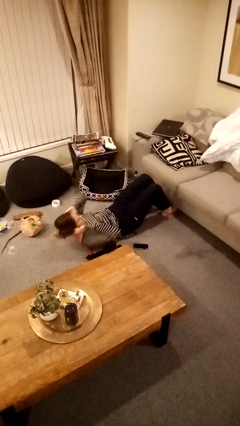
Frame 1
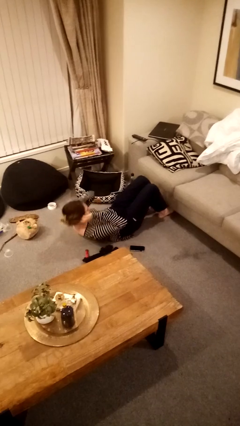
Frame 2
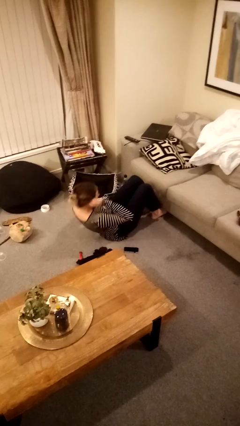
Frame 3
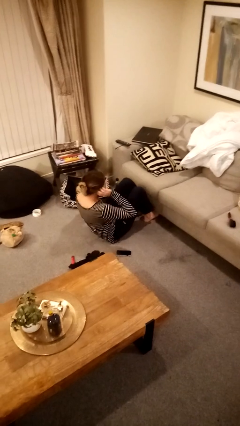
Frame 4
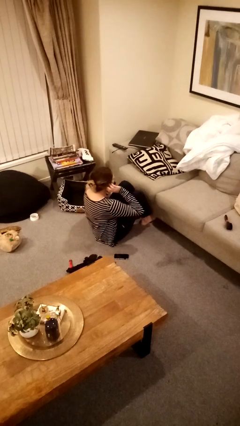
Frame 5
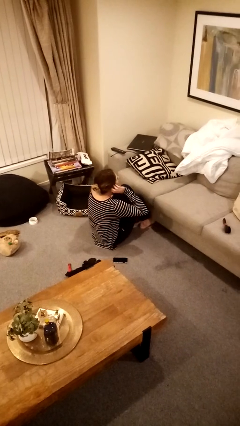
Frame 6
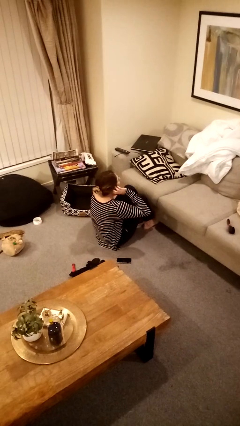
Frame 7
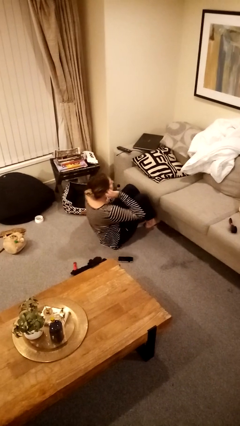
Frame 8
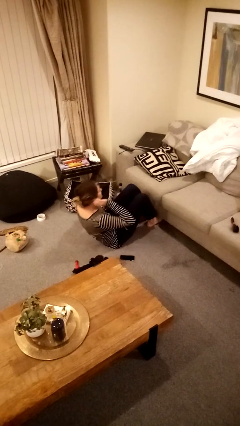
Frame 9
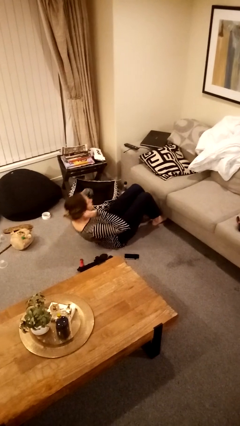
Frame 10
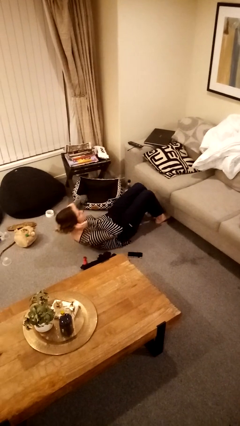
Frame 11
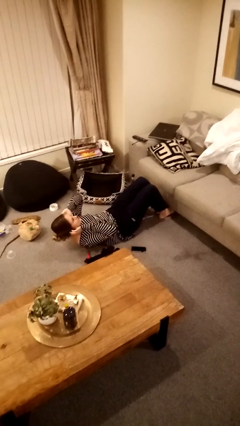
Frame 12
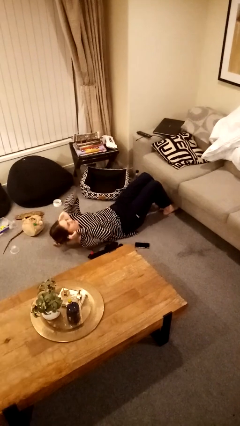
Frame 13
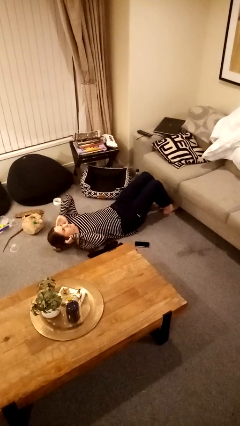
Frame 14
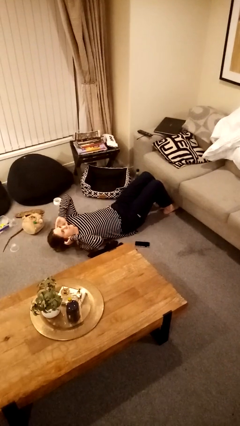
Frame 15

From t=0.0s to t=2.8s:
person exercises with situp

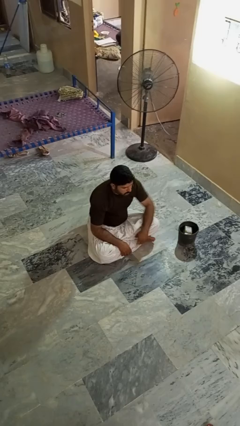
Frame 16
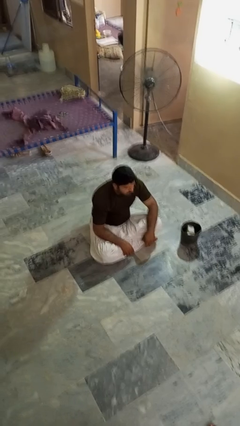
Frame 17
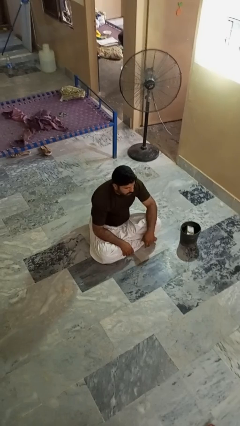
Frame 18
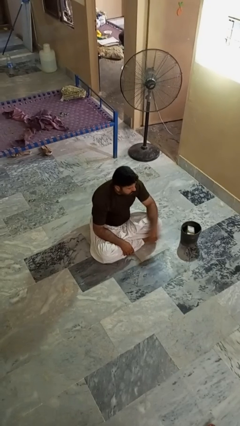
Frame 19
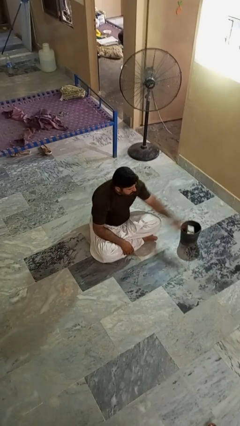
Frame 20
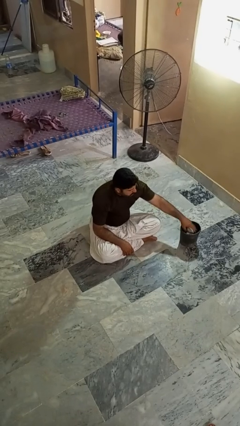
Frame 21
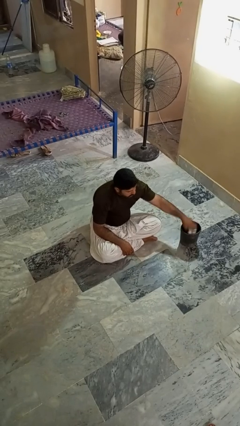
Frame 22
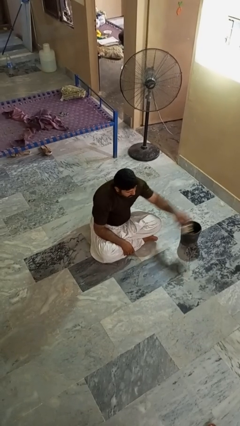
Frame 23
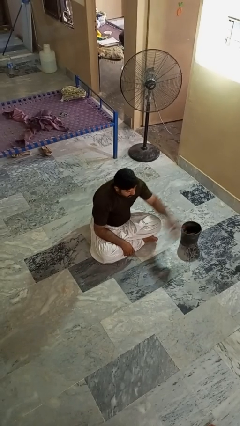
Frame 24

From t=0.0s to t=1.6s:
person takes object from basket

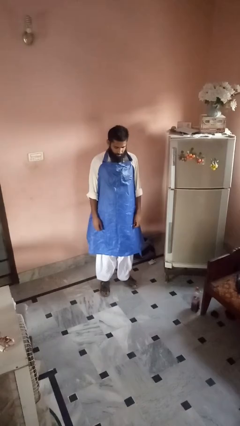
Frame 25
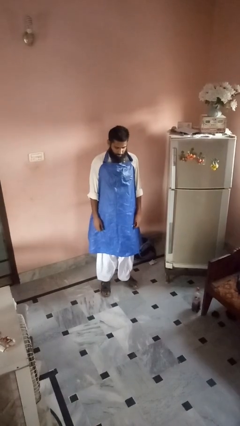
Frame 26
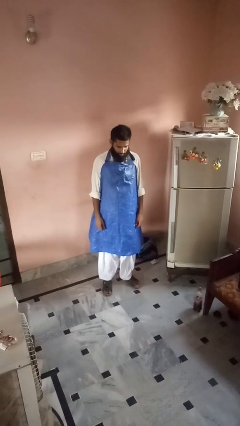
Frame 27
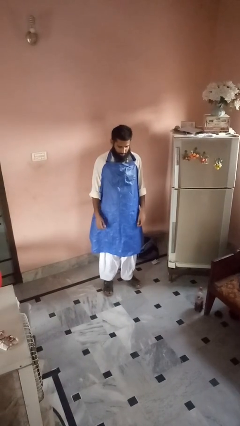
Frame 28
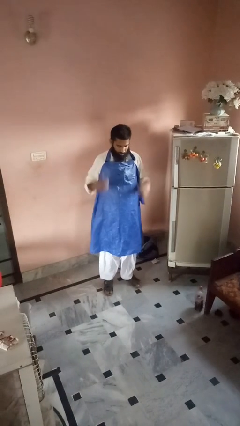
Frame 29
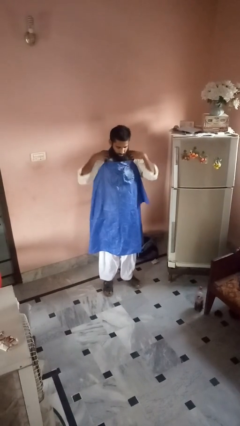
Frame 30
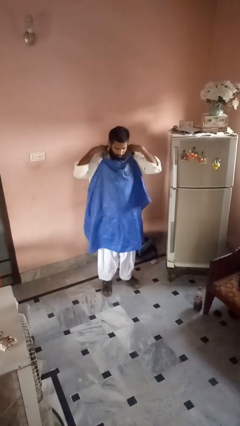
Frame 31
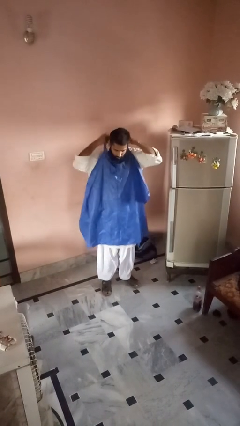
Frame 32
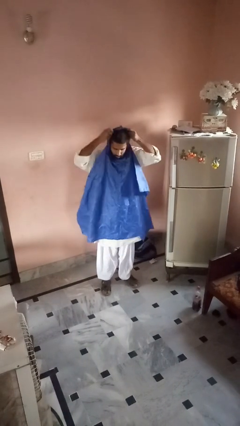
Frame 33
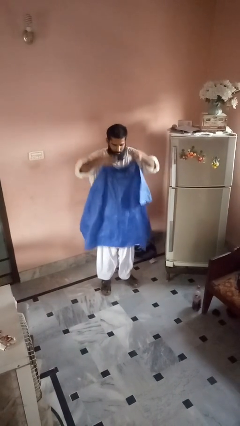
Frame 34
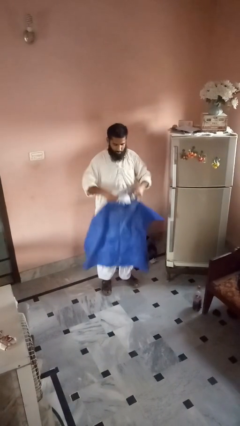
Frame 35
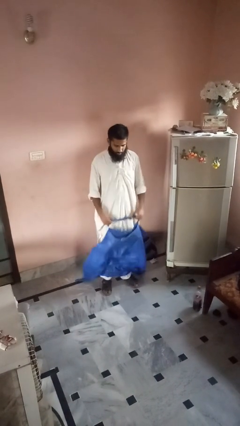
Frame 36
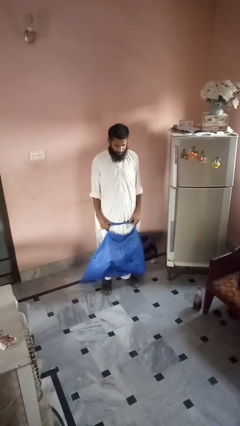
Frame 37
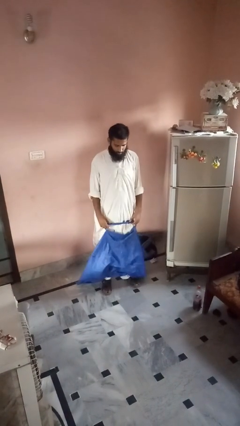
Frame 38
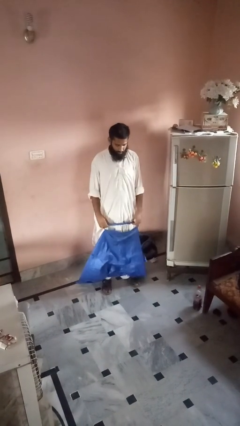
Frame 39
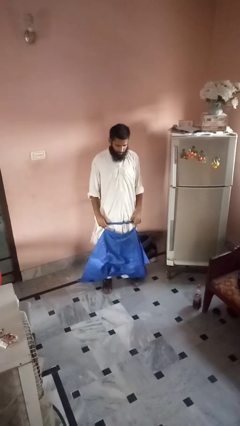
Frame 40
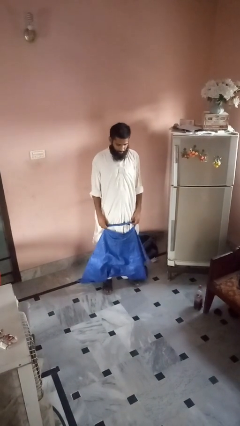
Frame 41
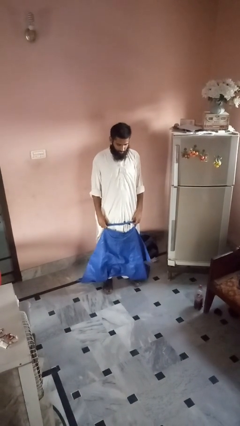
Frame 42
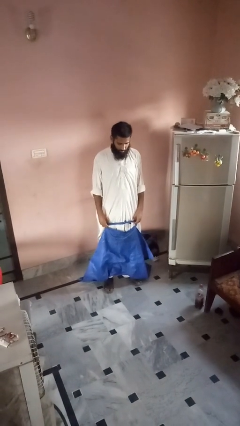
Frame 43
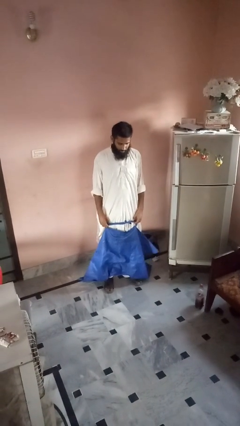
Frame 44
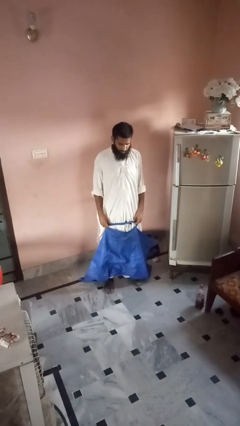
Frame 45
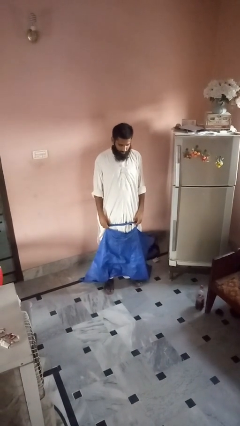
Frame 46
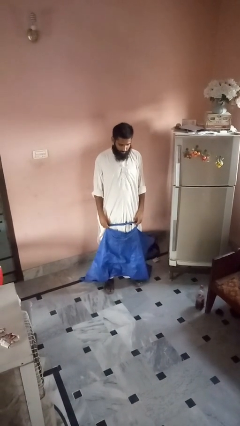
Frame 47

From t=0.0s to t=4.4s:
person takes off apron

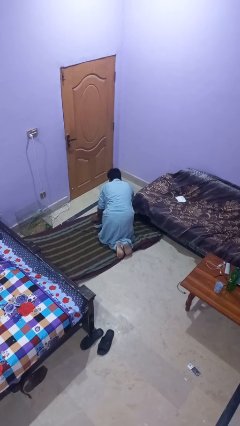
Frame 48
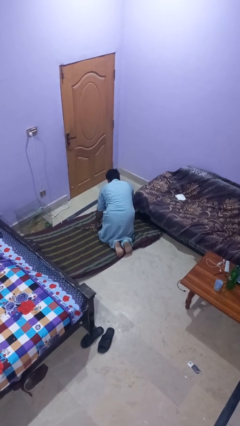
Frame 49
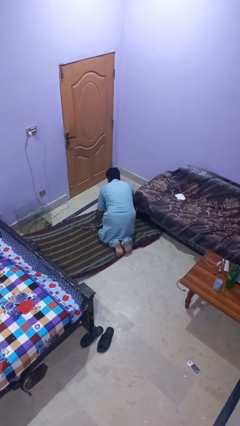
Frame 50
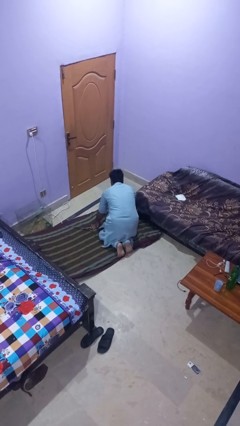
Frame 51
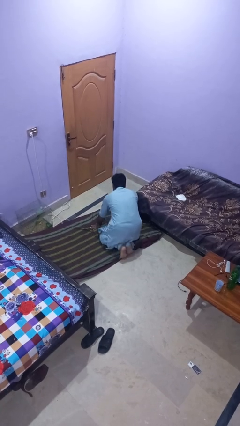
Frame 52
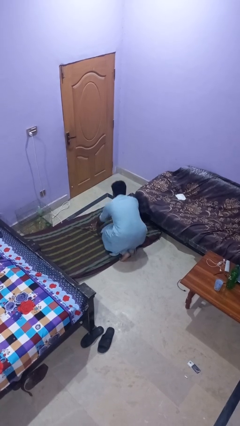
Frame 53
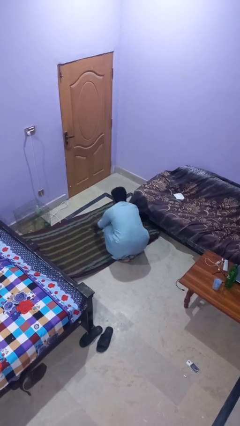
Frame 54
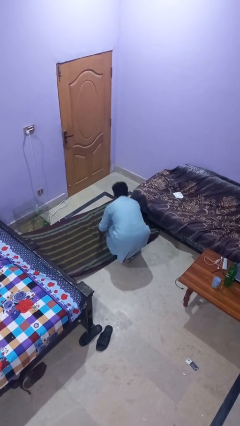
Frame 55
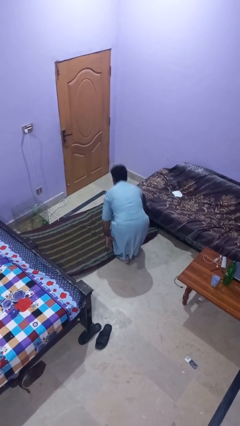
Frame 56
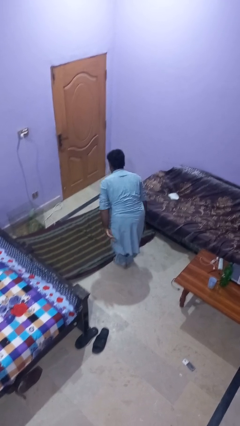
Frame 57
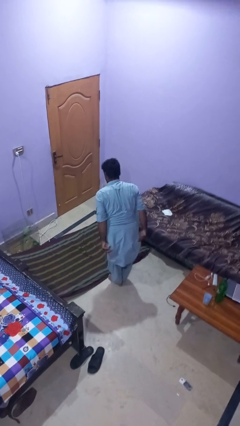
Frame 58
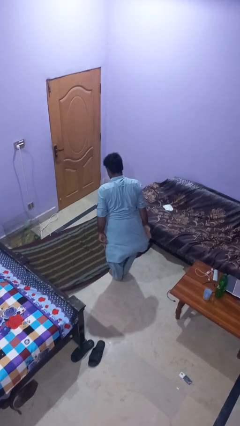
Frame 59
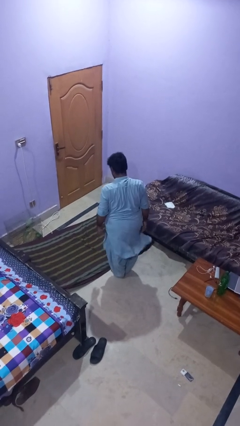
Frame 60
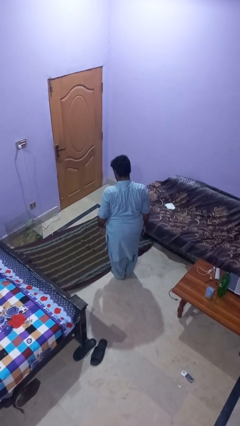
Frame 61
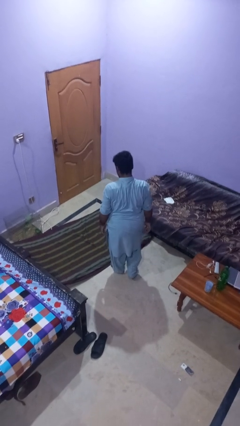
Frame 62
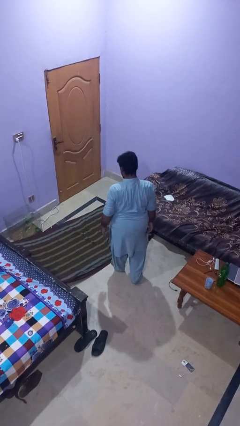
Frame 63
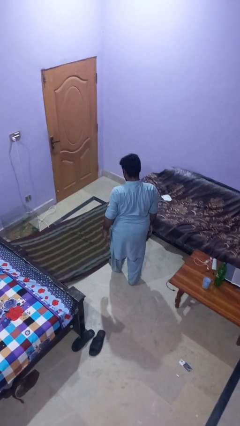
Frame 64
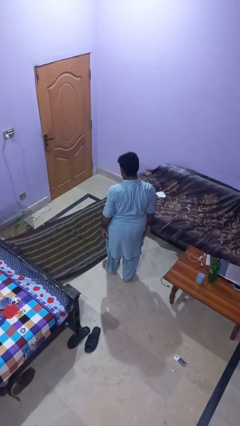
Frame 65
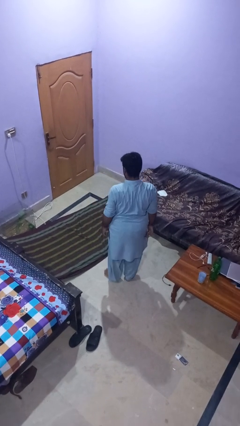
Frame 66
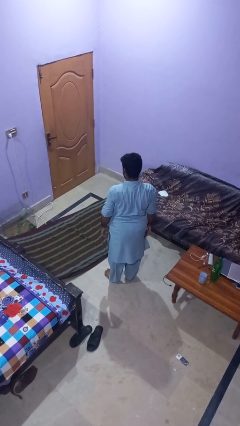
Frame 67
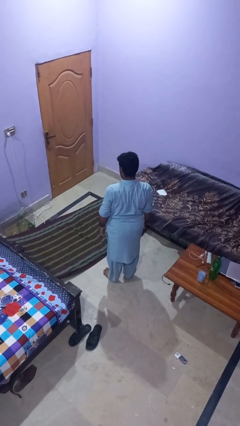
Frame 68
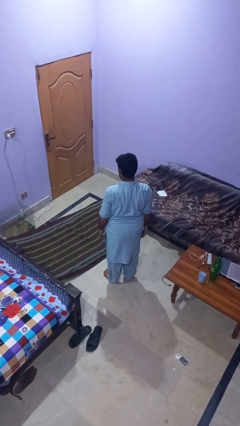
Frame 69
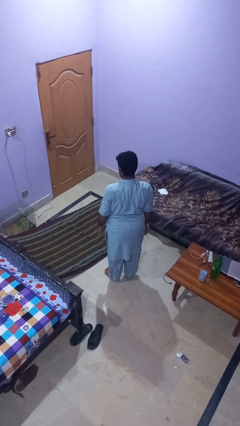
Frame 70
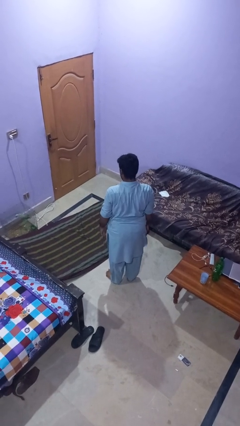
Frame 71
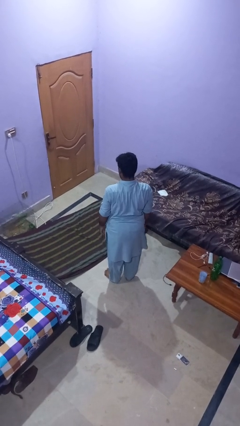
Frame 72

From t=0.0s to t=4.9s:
person stands up from floor

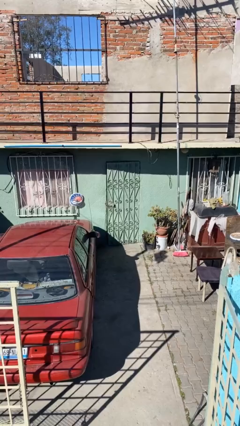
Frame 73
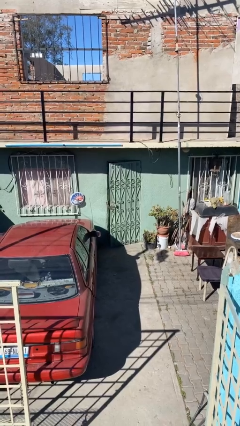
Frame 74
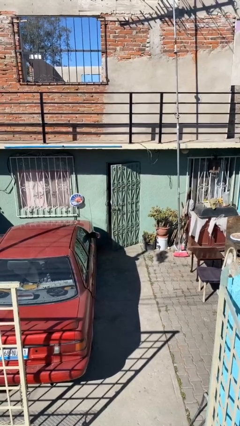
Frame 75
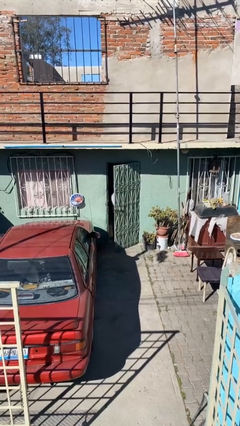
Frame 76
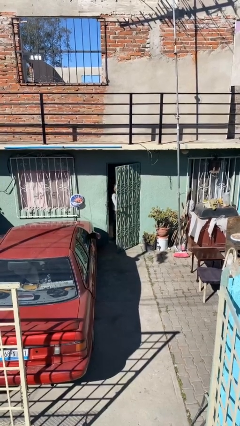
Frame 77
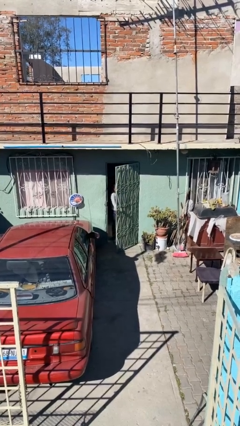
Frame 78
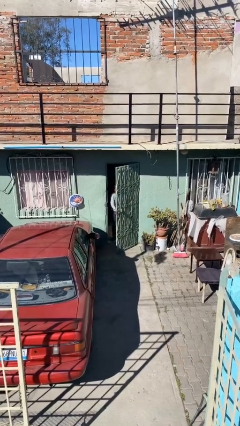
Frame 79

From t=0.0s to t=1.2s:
person opens facility door

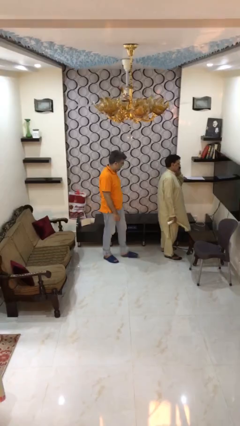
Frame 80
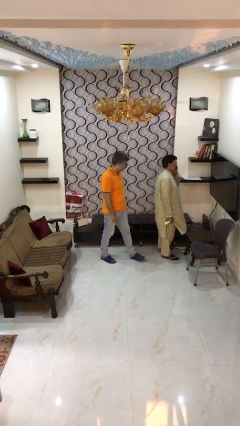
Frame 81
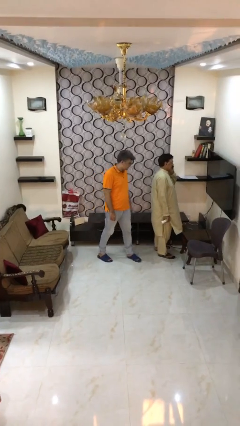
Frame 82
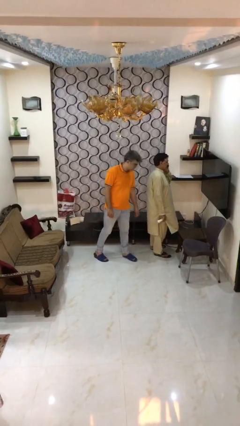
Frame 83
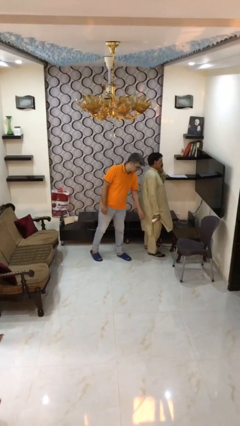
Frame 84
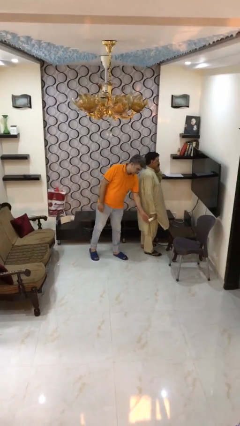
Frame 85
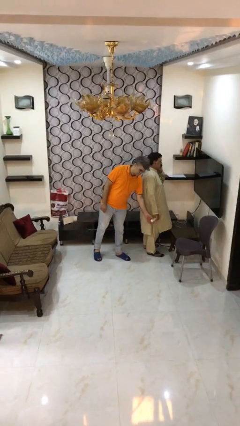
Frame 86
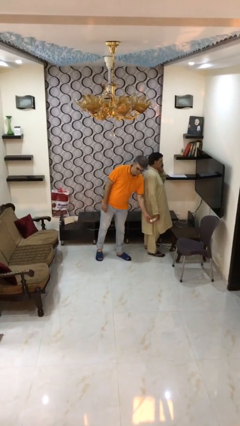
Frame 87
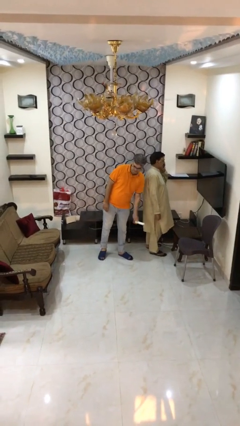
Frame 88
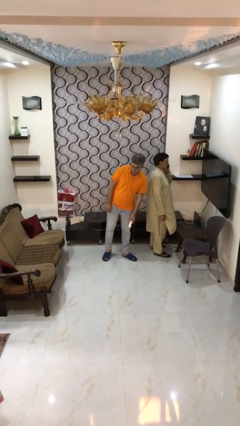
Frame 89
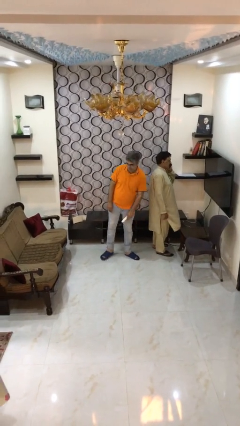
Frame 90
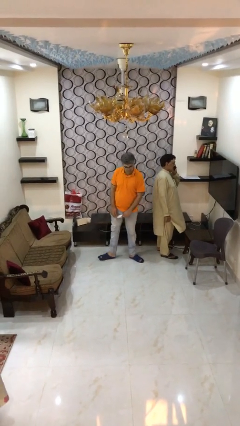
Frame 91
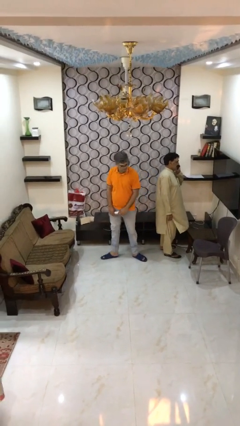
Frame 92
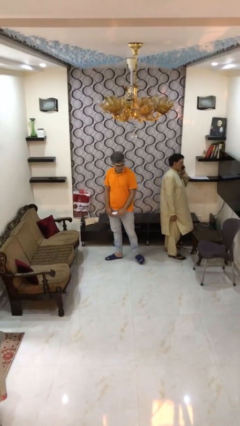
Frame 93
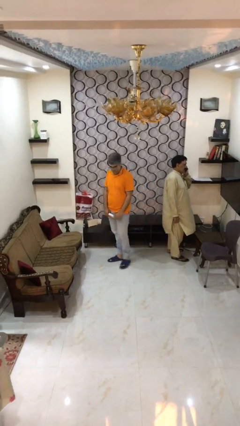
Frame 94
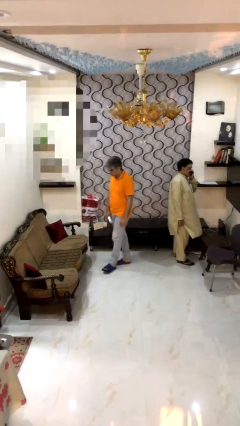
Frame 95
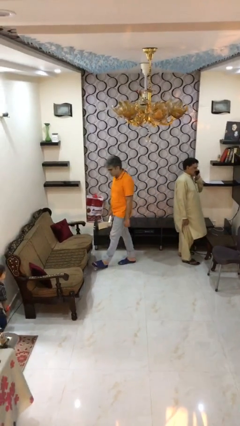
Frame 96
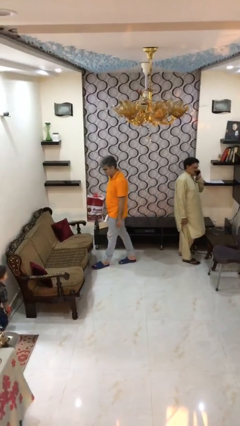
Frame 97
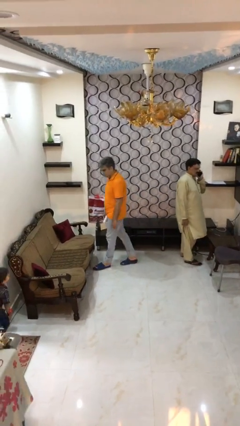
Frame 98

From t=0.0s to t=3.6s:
person steals object from person
